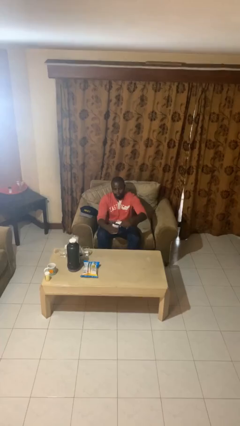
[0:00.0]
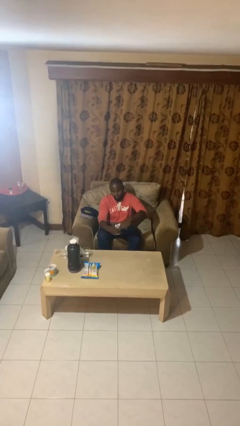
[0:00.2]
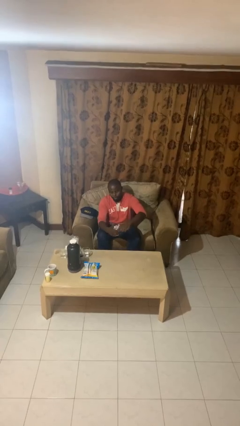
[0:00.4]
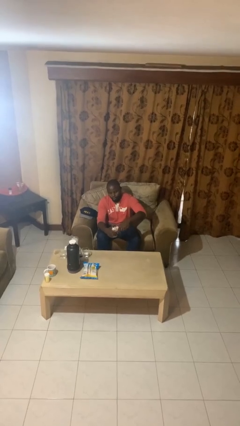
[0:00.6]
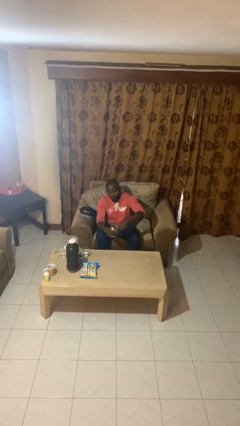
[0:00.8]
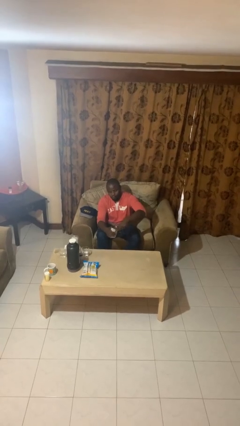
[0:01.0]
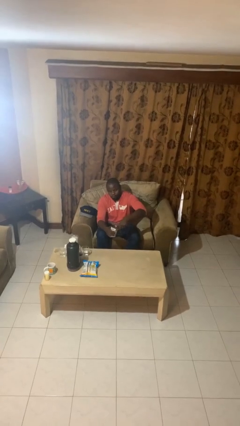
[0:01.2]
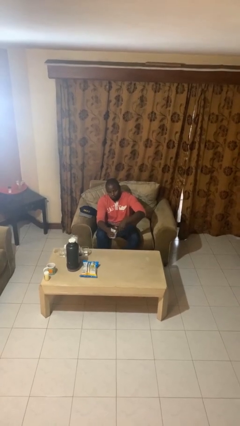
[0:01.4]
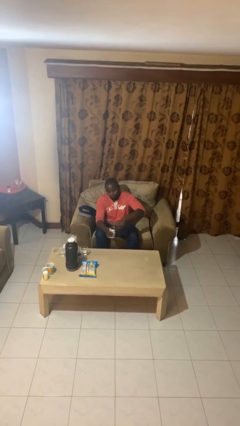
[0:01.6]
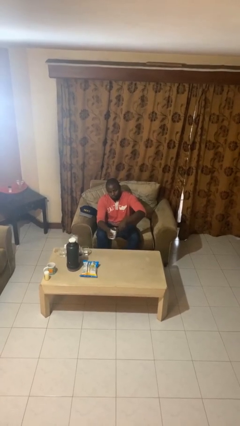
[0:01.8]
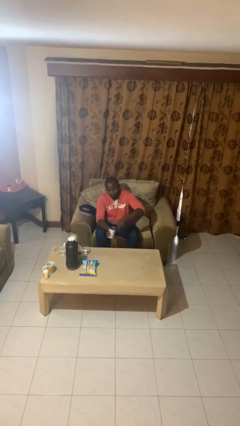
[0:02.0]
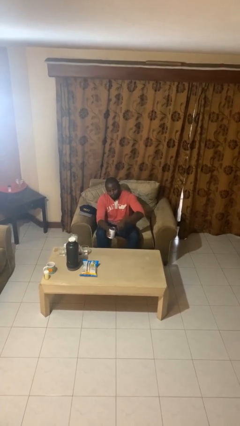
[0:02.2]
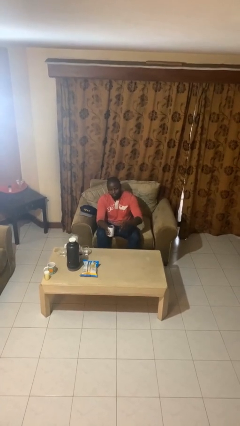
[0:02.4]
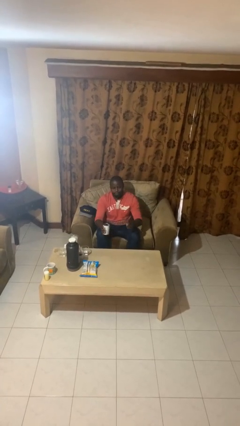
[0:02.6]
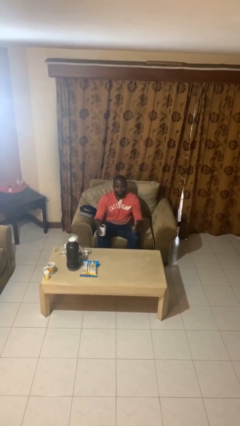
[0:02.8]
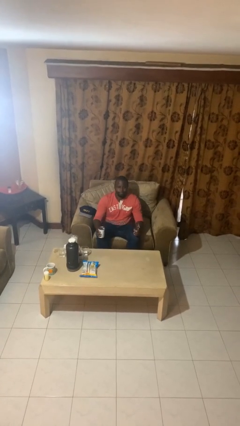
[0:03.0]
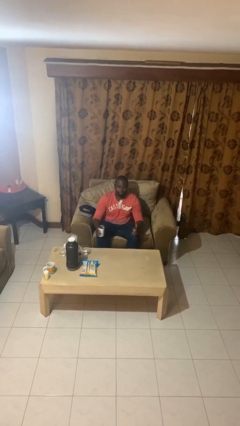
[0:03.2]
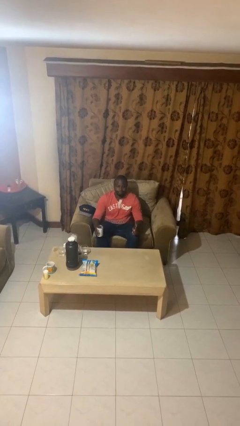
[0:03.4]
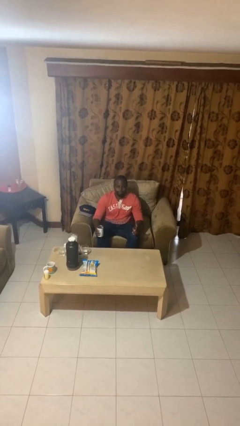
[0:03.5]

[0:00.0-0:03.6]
person opens can with can opener

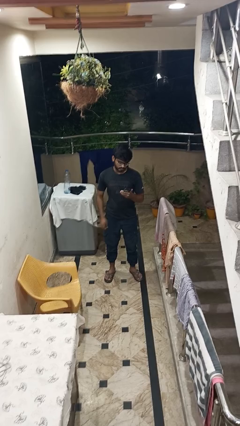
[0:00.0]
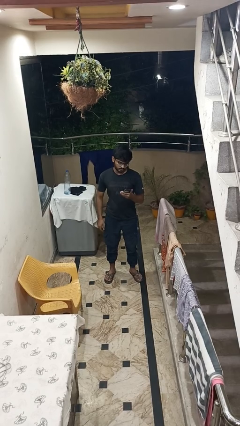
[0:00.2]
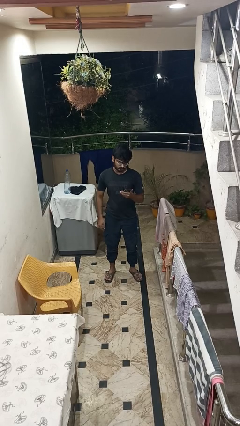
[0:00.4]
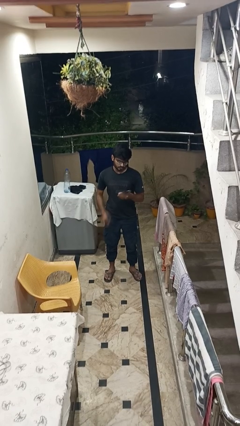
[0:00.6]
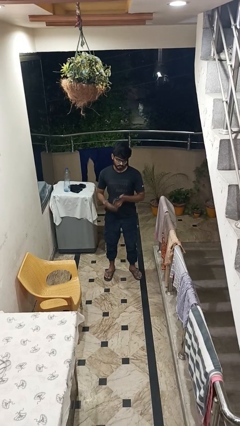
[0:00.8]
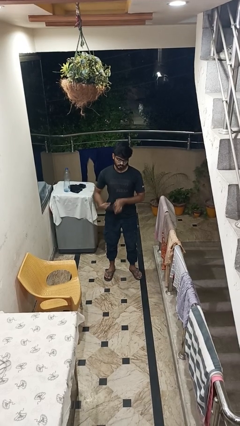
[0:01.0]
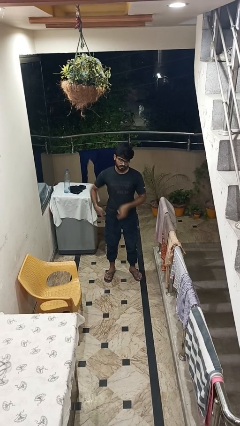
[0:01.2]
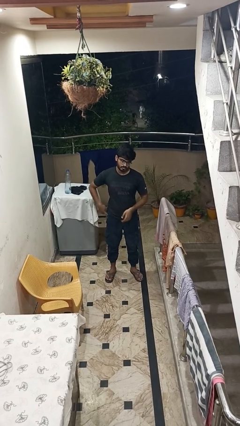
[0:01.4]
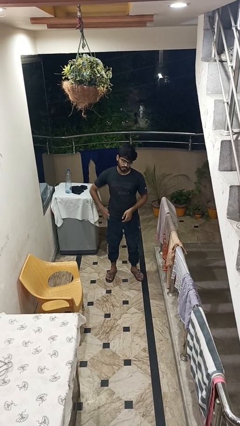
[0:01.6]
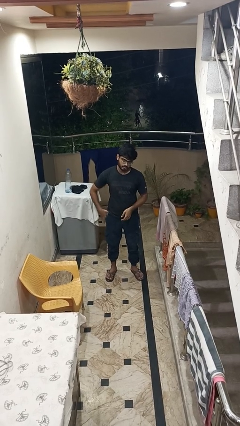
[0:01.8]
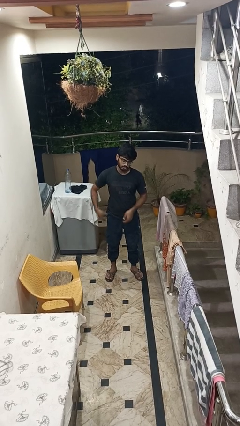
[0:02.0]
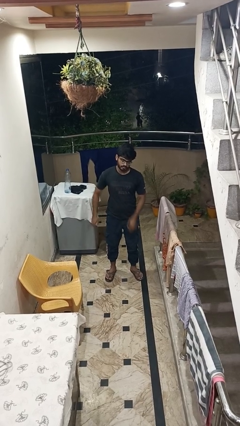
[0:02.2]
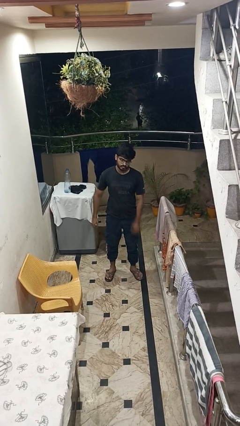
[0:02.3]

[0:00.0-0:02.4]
person puts phone into pocket

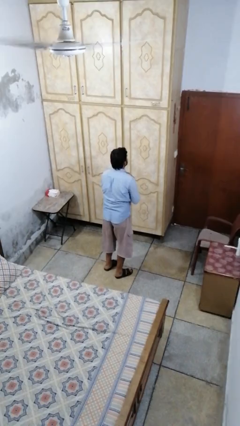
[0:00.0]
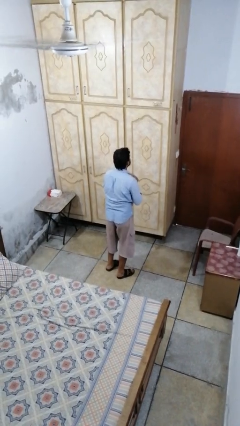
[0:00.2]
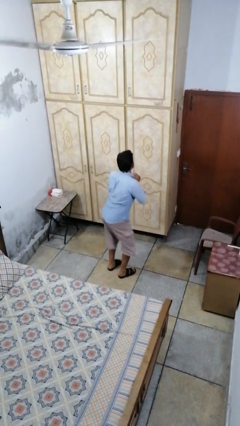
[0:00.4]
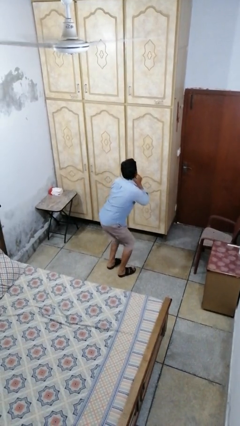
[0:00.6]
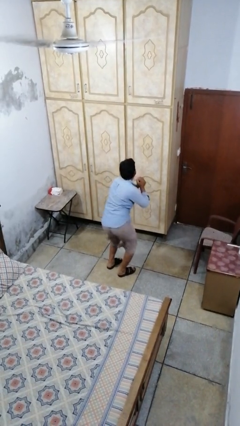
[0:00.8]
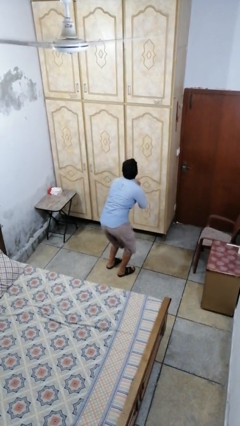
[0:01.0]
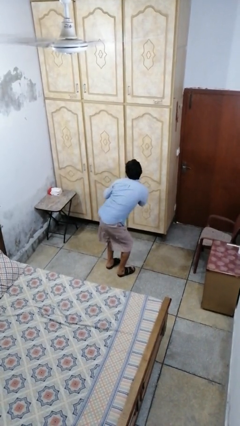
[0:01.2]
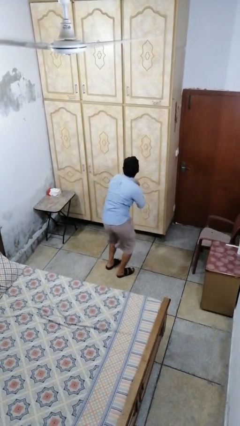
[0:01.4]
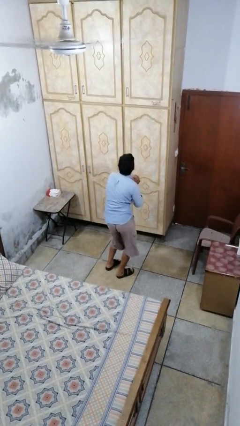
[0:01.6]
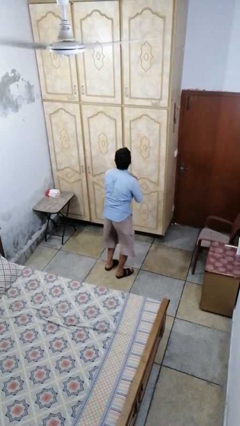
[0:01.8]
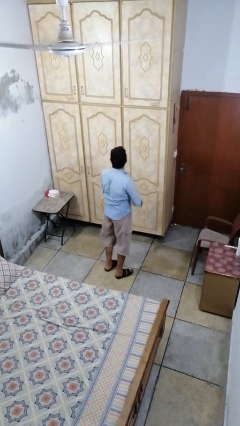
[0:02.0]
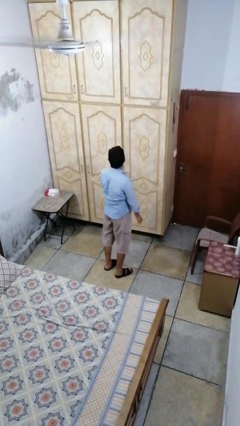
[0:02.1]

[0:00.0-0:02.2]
person wiggles hips

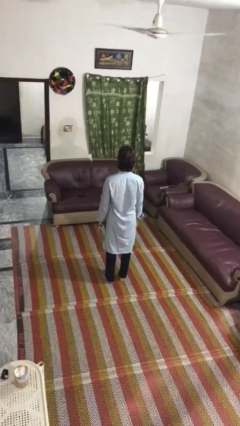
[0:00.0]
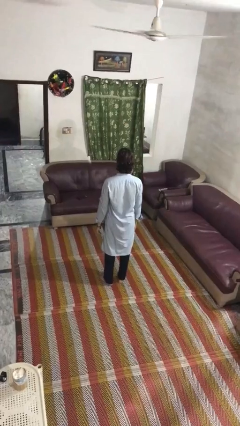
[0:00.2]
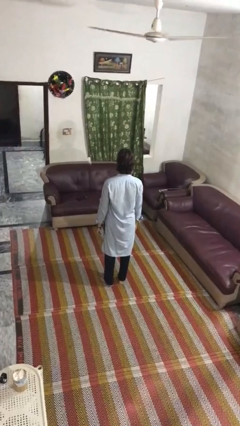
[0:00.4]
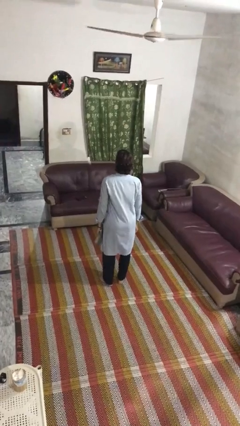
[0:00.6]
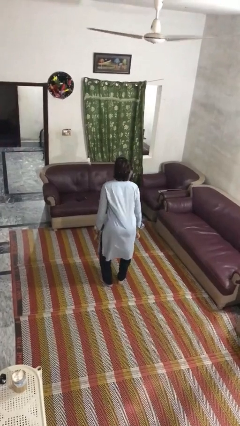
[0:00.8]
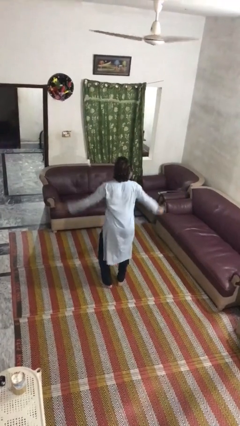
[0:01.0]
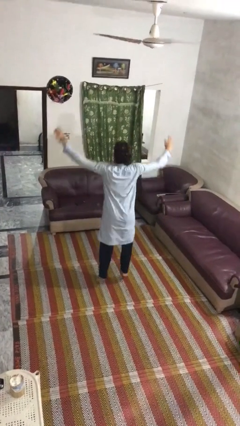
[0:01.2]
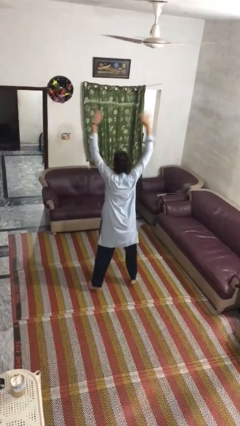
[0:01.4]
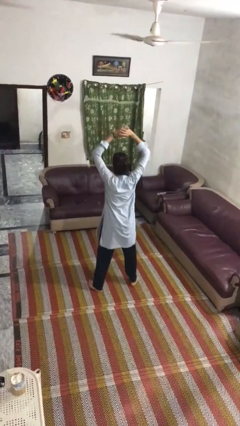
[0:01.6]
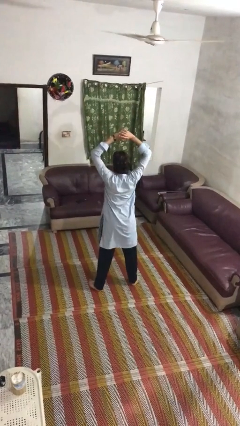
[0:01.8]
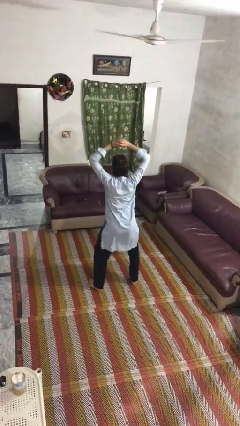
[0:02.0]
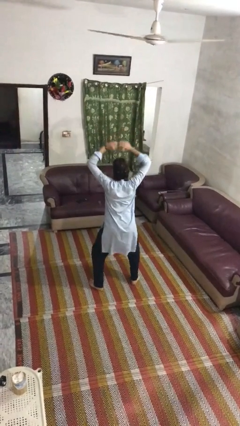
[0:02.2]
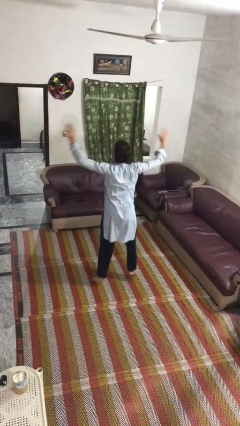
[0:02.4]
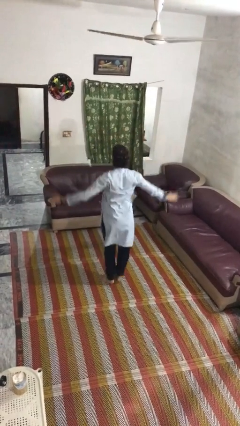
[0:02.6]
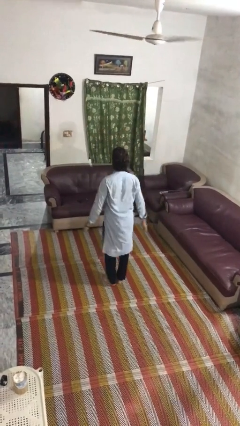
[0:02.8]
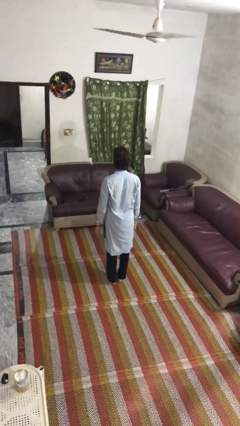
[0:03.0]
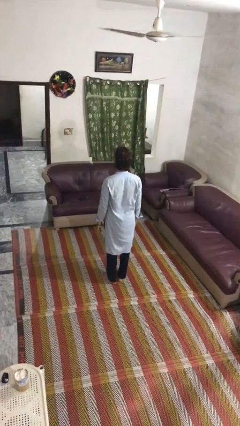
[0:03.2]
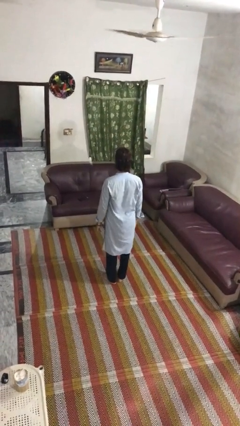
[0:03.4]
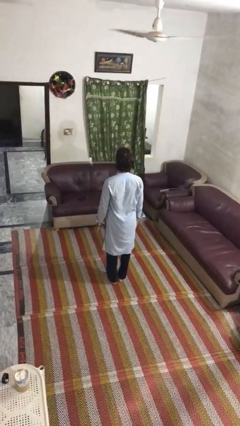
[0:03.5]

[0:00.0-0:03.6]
person exercises with jumping jacks

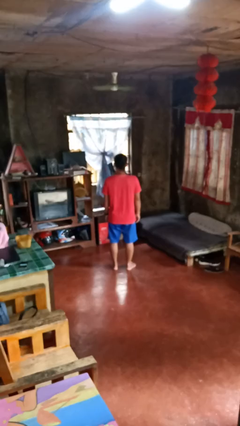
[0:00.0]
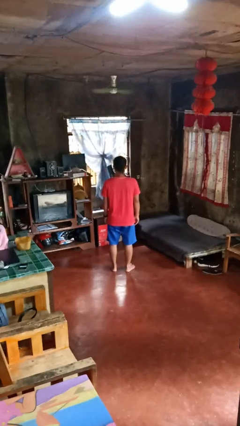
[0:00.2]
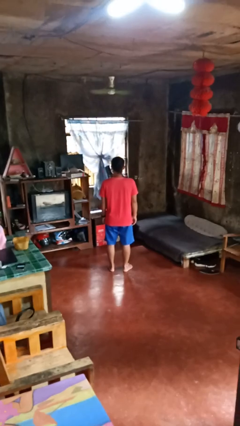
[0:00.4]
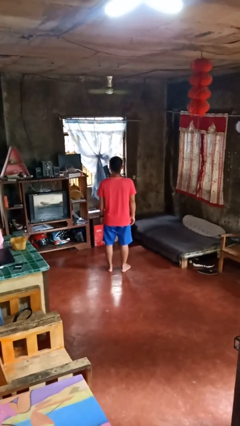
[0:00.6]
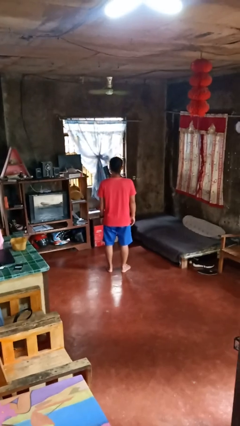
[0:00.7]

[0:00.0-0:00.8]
person salutes

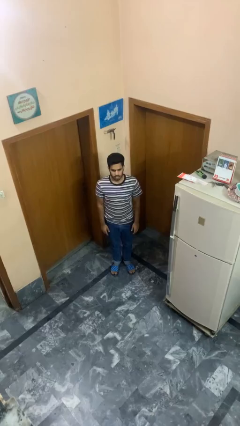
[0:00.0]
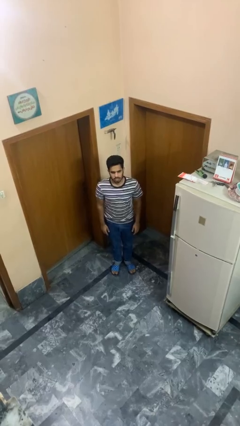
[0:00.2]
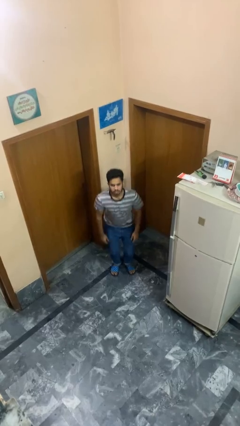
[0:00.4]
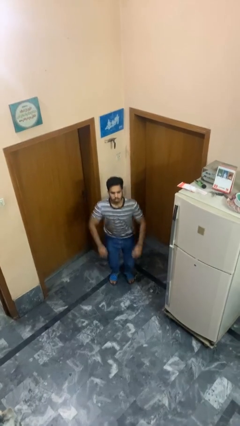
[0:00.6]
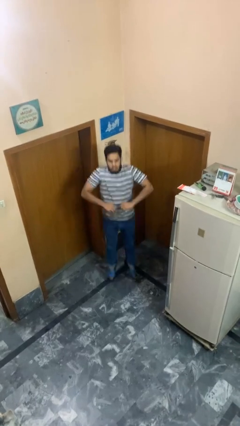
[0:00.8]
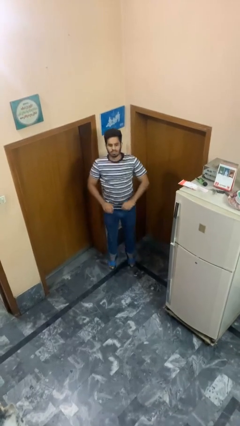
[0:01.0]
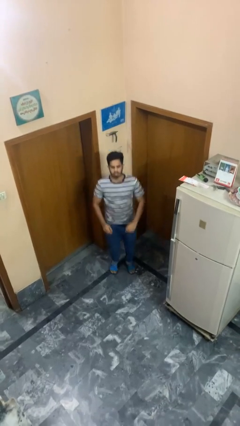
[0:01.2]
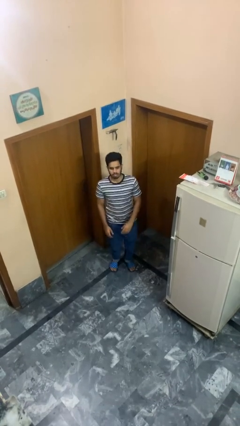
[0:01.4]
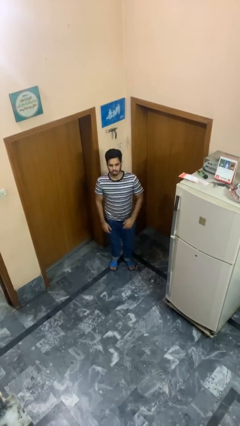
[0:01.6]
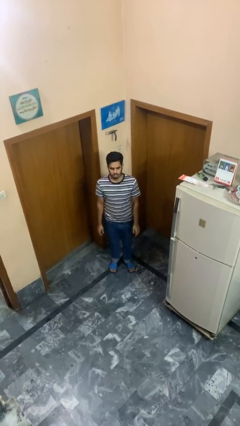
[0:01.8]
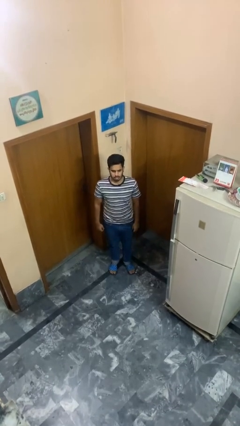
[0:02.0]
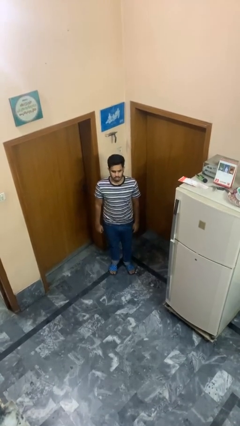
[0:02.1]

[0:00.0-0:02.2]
person jumps

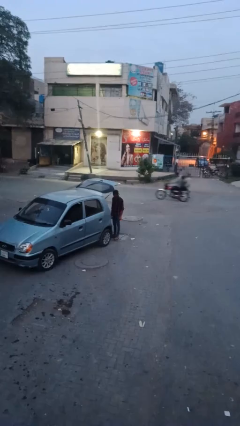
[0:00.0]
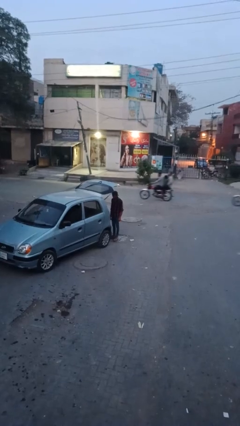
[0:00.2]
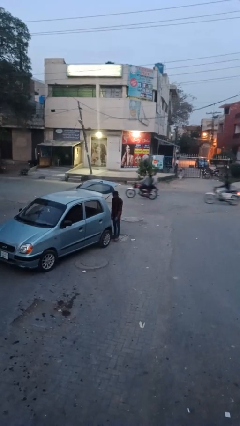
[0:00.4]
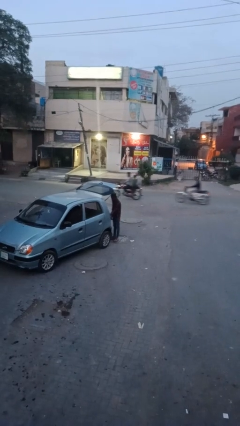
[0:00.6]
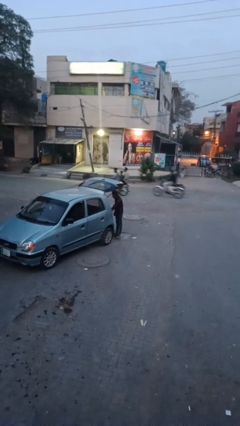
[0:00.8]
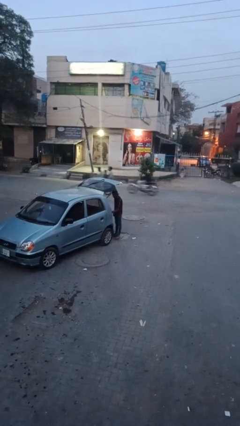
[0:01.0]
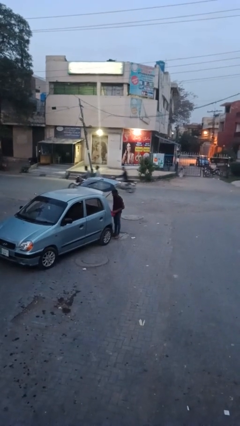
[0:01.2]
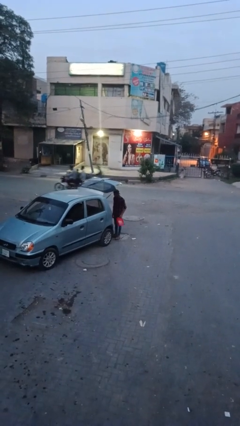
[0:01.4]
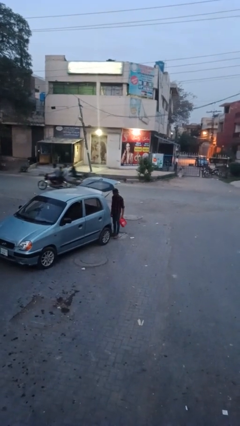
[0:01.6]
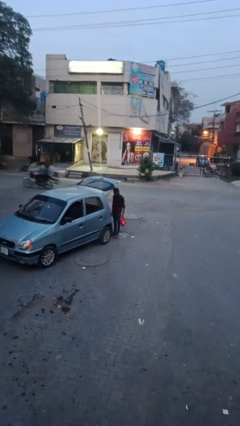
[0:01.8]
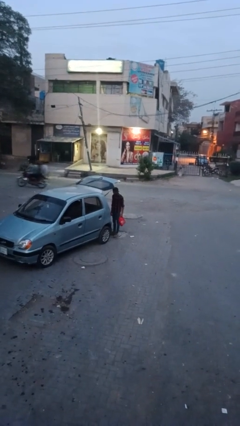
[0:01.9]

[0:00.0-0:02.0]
person unloads car
